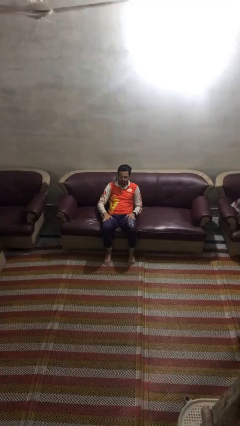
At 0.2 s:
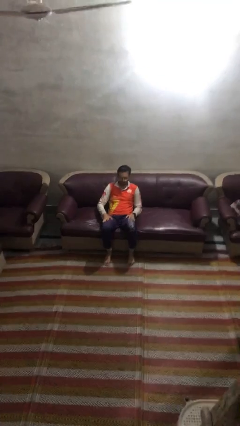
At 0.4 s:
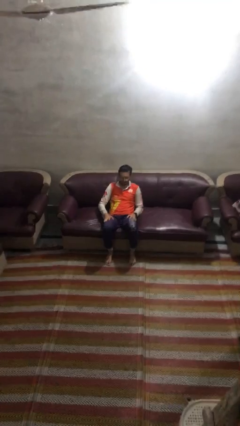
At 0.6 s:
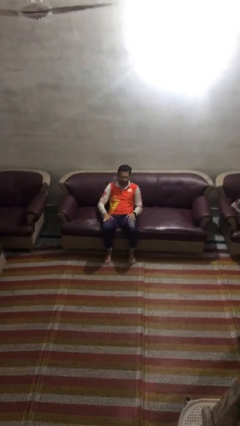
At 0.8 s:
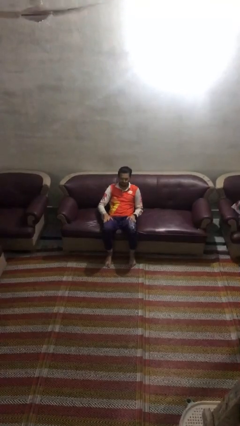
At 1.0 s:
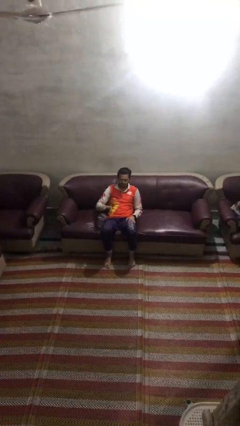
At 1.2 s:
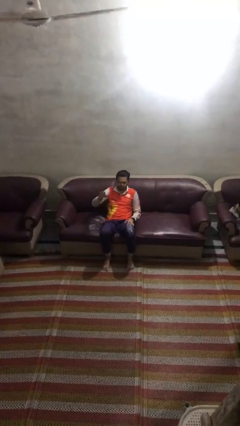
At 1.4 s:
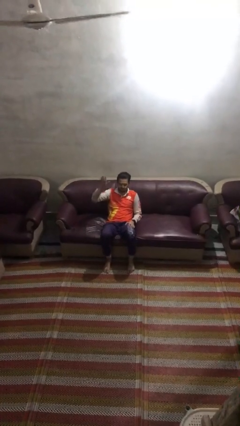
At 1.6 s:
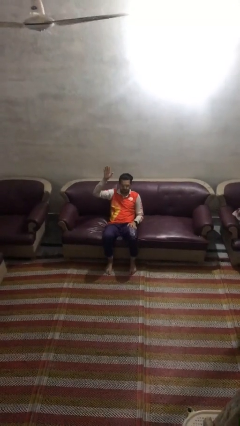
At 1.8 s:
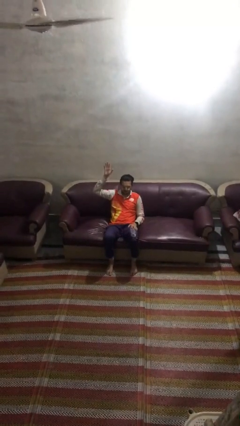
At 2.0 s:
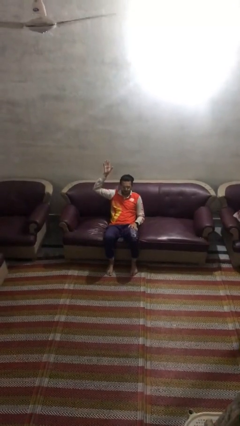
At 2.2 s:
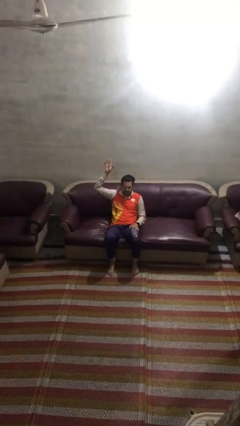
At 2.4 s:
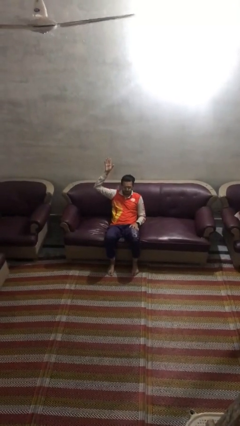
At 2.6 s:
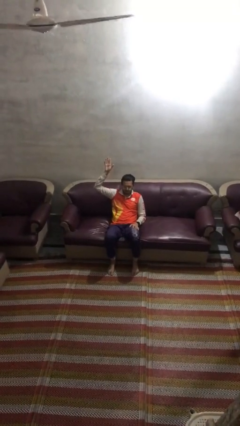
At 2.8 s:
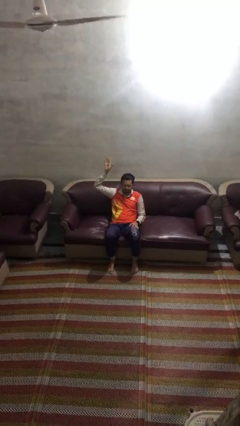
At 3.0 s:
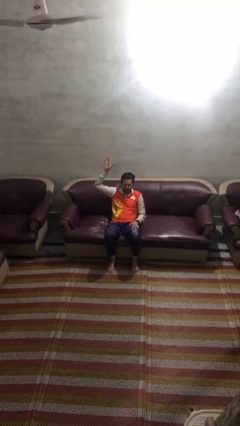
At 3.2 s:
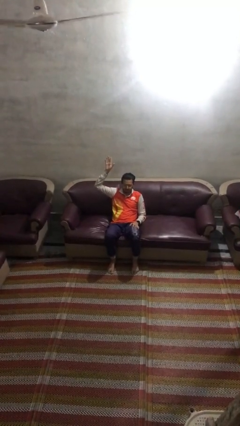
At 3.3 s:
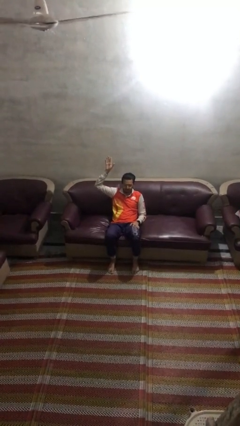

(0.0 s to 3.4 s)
person gestures raise hand

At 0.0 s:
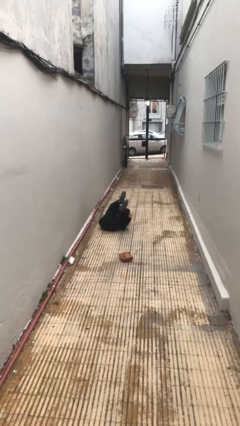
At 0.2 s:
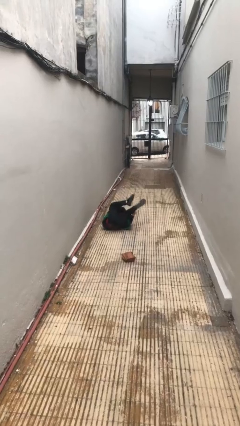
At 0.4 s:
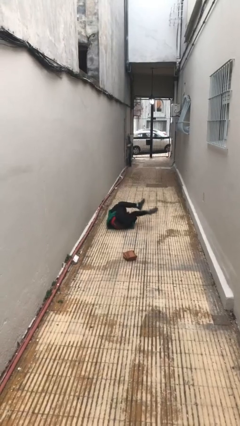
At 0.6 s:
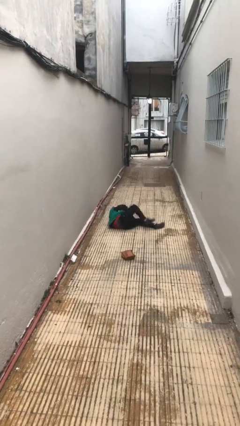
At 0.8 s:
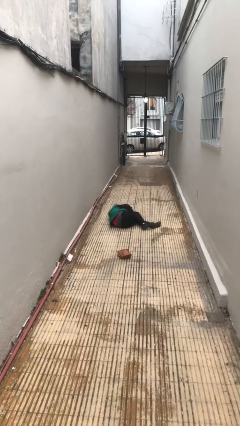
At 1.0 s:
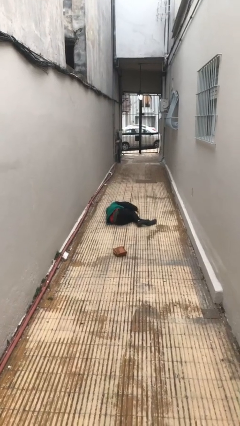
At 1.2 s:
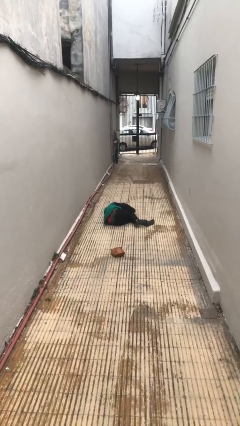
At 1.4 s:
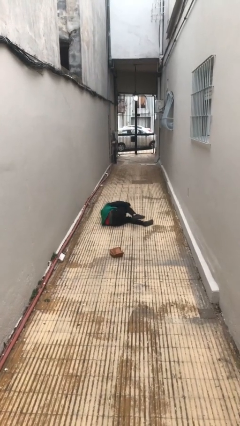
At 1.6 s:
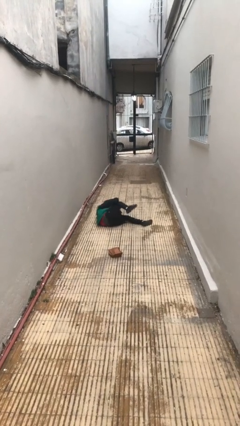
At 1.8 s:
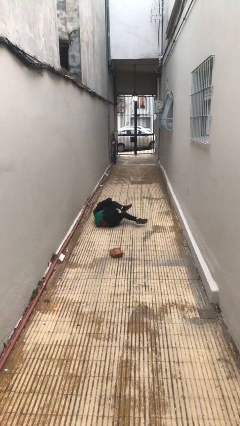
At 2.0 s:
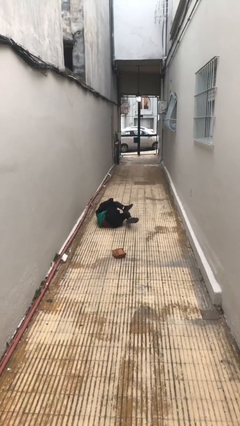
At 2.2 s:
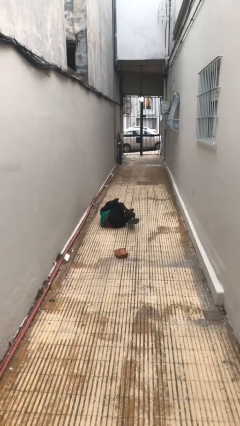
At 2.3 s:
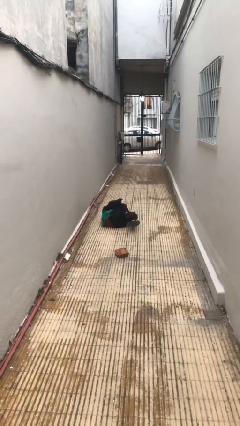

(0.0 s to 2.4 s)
person lies down on floor

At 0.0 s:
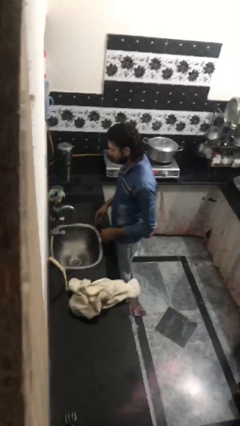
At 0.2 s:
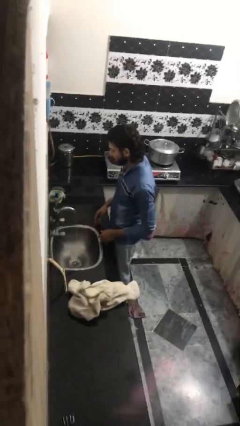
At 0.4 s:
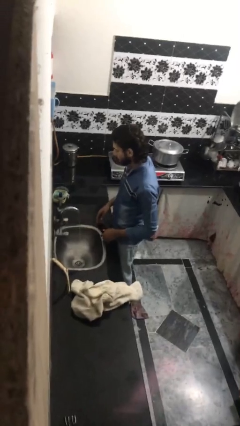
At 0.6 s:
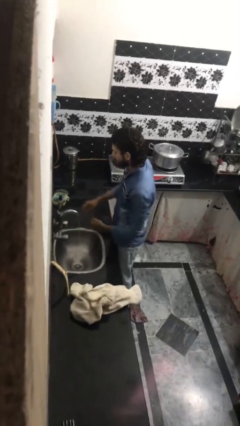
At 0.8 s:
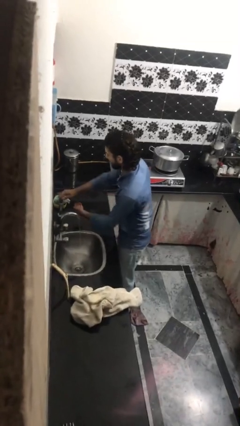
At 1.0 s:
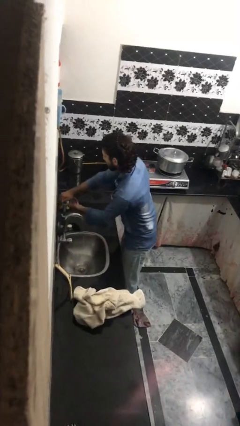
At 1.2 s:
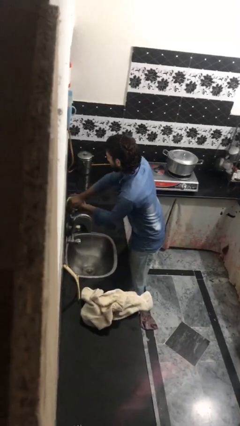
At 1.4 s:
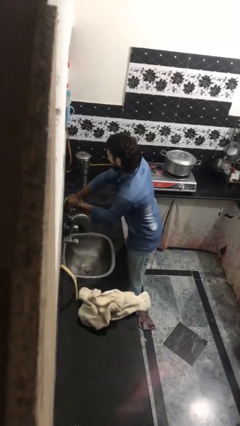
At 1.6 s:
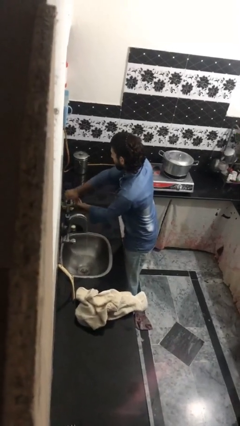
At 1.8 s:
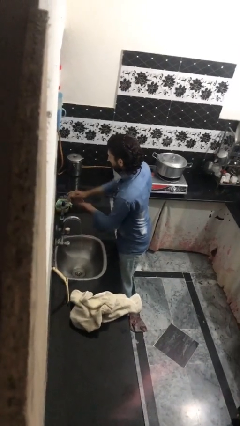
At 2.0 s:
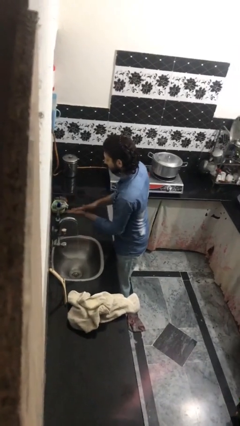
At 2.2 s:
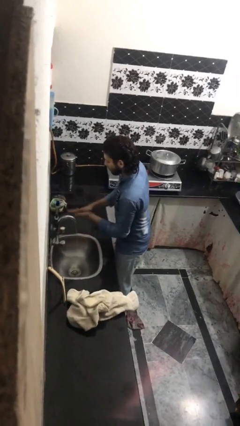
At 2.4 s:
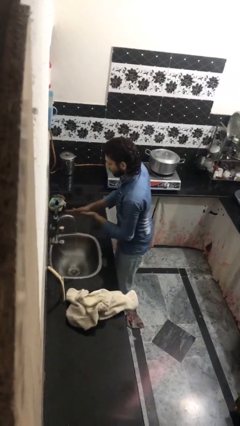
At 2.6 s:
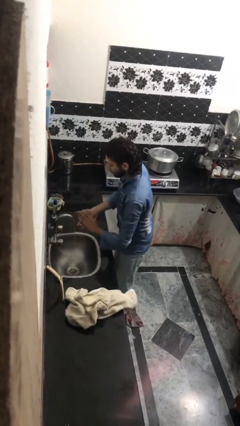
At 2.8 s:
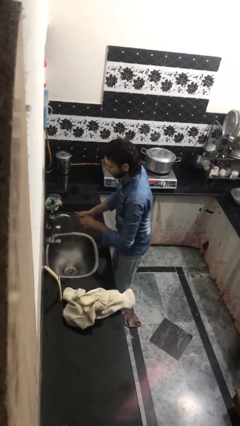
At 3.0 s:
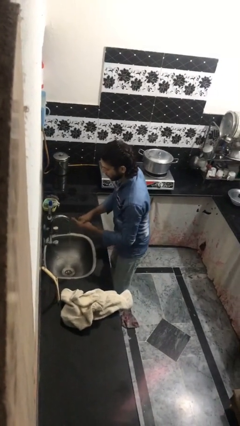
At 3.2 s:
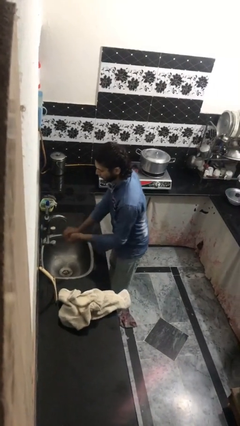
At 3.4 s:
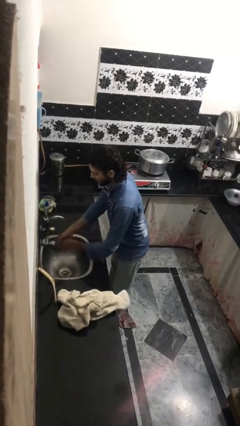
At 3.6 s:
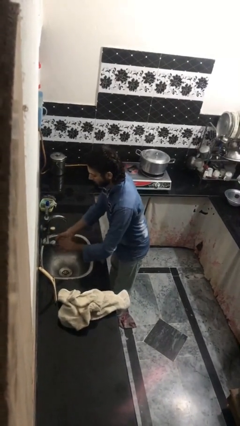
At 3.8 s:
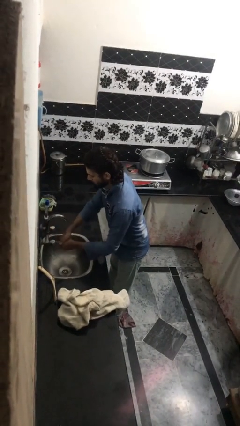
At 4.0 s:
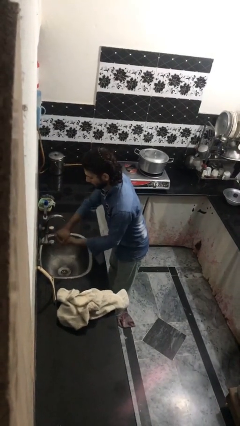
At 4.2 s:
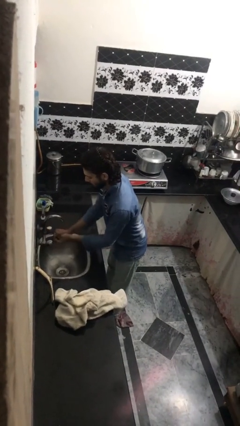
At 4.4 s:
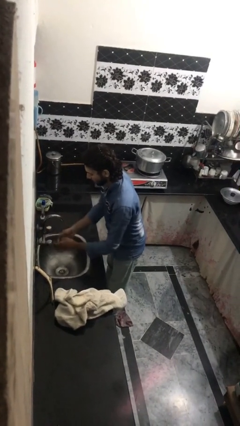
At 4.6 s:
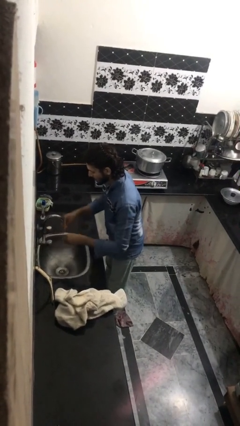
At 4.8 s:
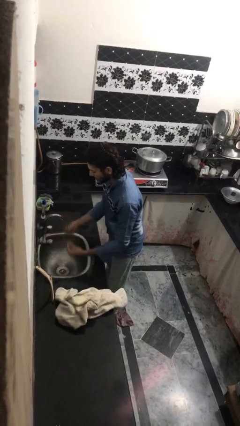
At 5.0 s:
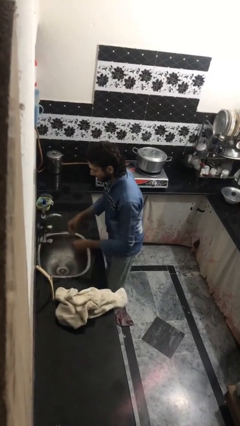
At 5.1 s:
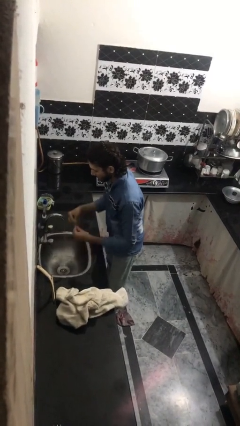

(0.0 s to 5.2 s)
person washes hands

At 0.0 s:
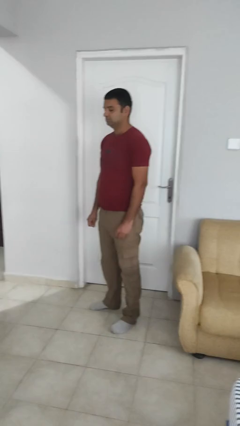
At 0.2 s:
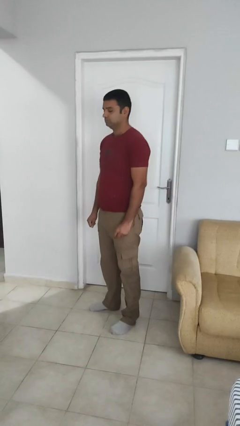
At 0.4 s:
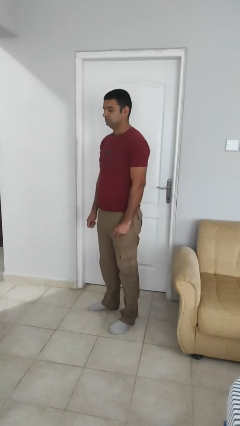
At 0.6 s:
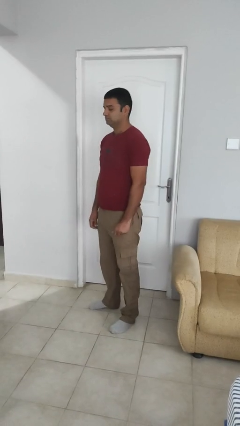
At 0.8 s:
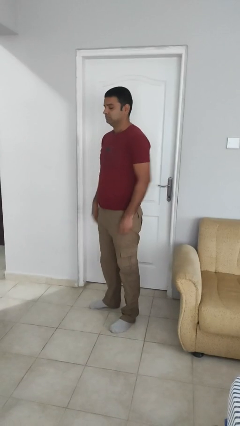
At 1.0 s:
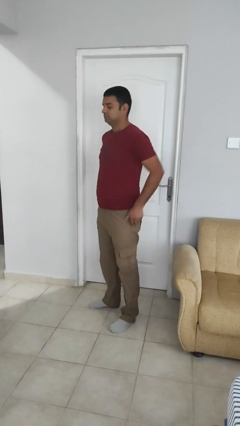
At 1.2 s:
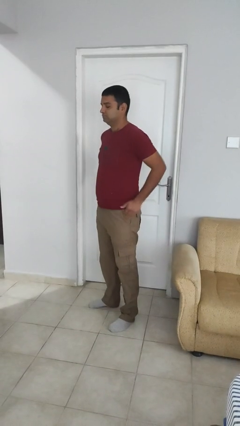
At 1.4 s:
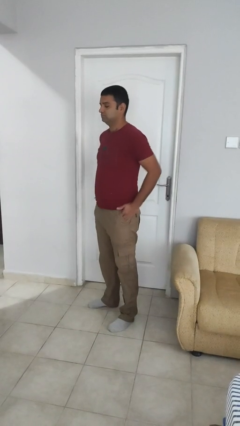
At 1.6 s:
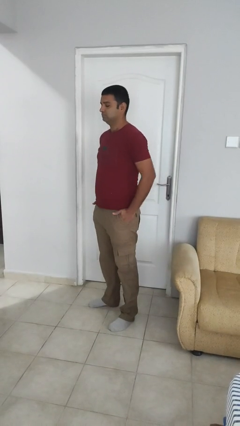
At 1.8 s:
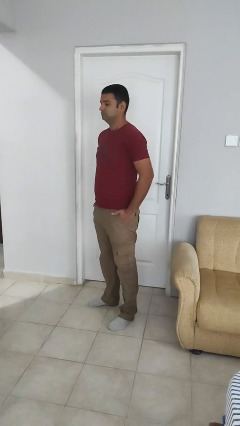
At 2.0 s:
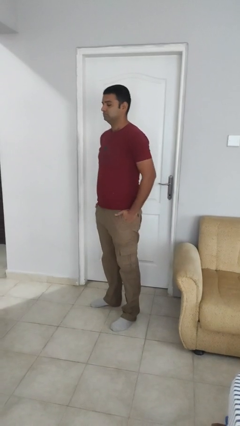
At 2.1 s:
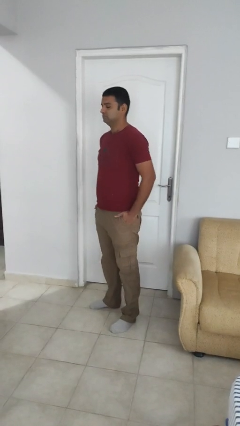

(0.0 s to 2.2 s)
person puts hands in back pockets

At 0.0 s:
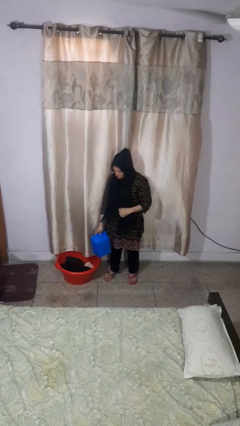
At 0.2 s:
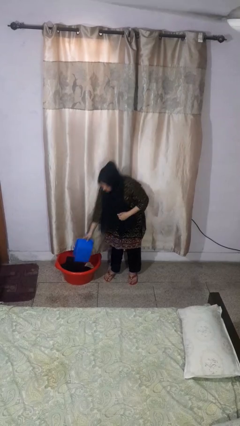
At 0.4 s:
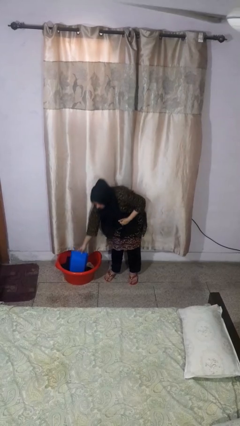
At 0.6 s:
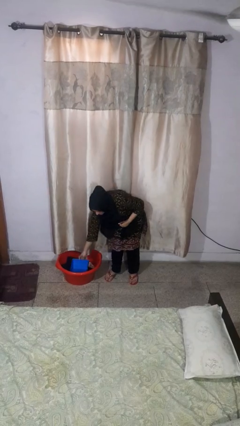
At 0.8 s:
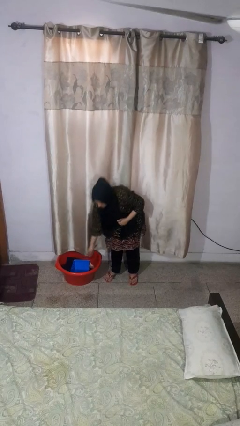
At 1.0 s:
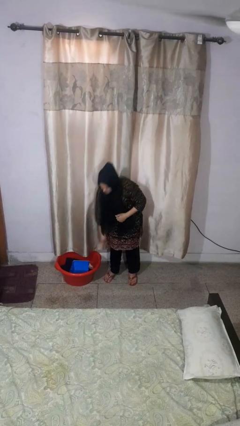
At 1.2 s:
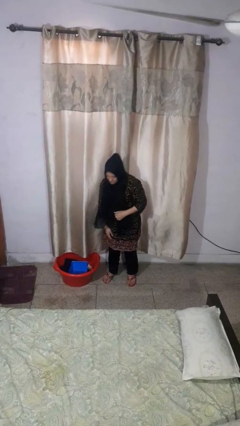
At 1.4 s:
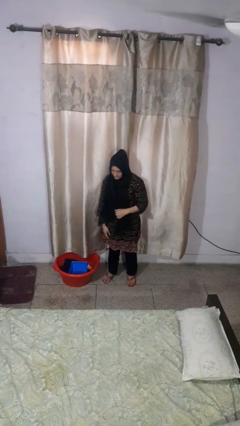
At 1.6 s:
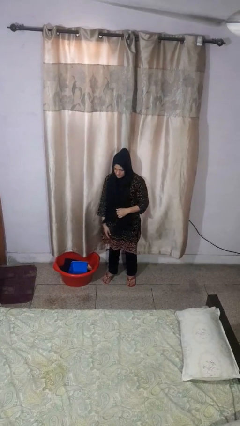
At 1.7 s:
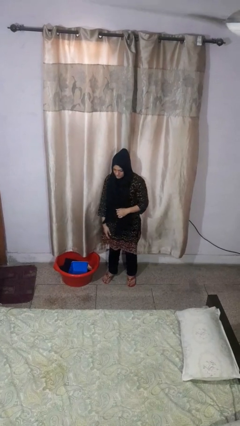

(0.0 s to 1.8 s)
person puts object into basket

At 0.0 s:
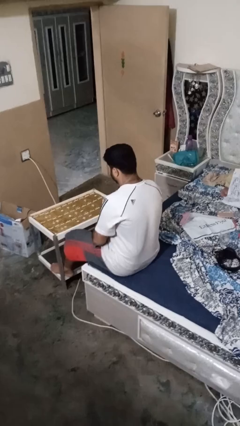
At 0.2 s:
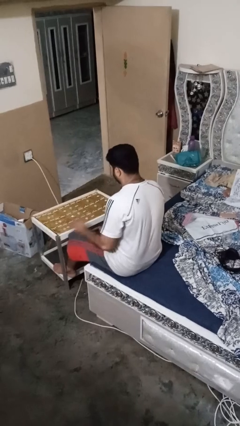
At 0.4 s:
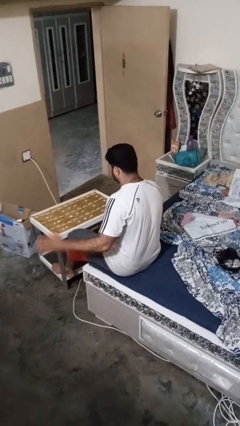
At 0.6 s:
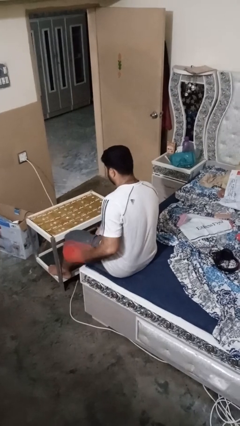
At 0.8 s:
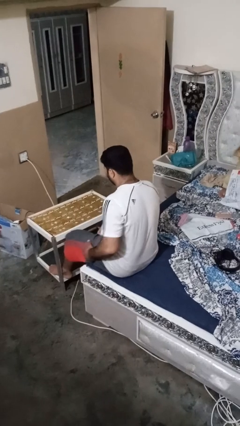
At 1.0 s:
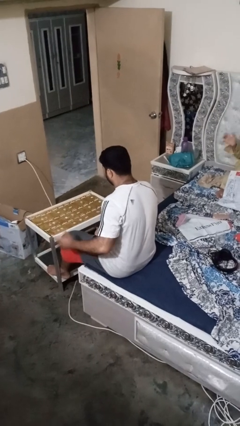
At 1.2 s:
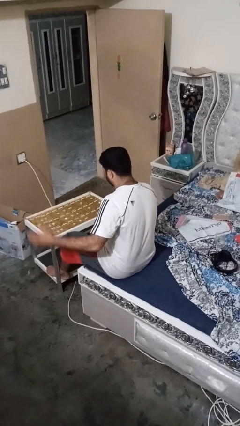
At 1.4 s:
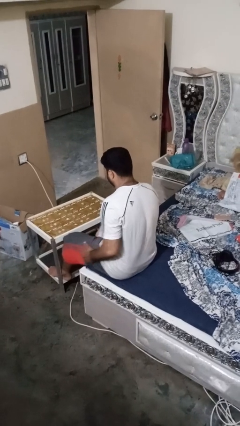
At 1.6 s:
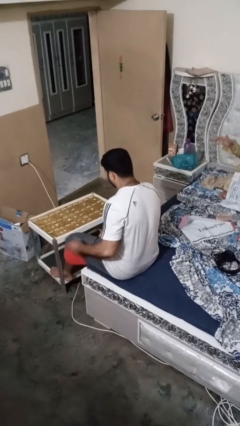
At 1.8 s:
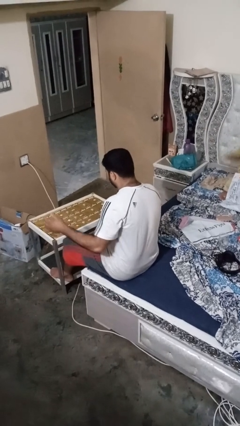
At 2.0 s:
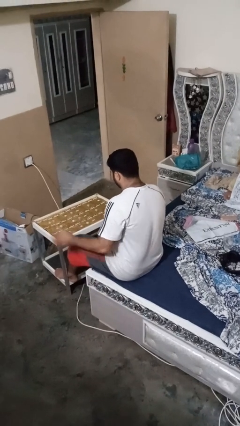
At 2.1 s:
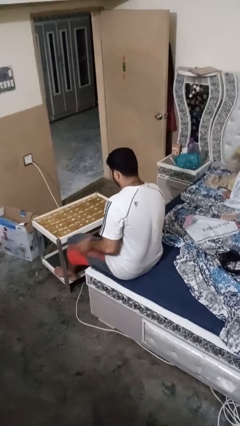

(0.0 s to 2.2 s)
person slaps hands on thighs
